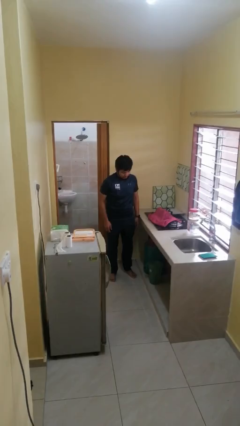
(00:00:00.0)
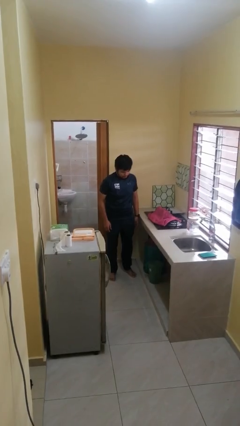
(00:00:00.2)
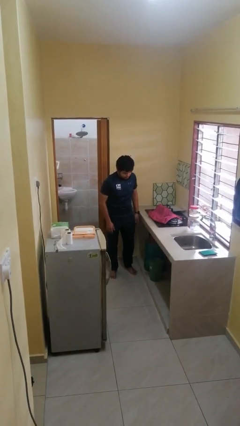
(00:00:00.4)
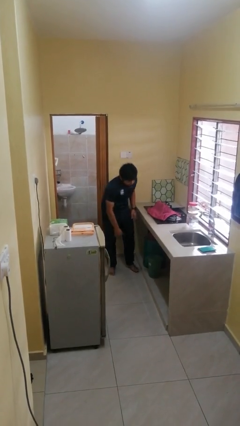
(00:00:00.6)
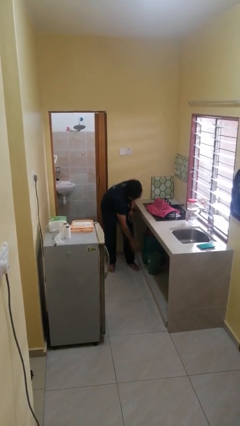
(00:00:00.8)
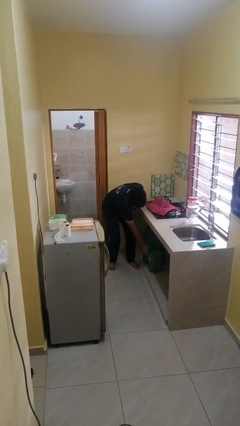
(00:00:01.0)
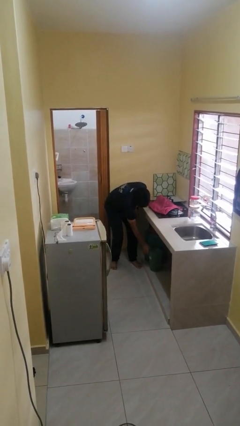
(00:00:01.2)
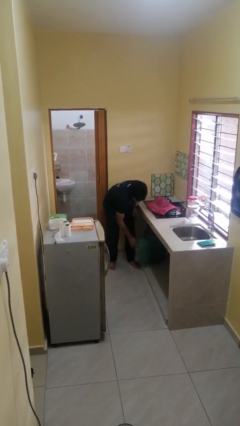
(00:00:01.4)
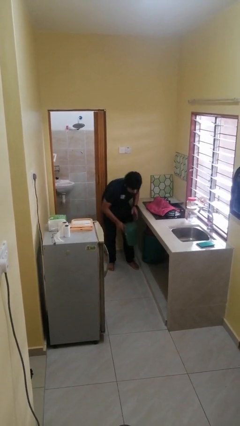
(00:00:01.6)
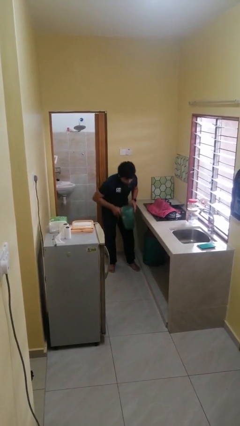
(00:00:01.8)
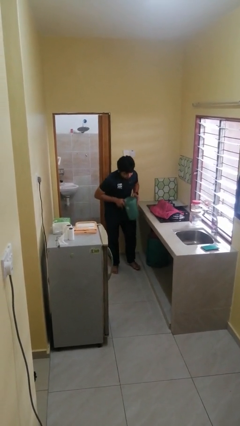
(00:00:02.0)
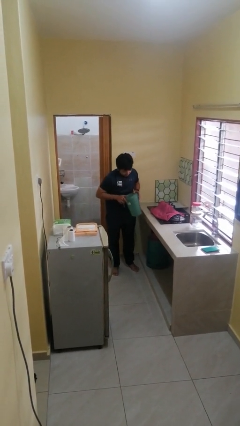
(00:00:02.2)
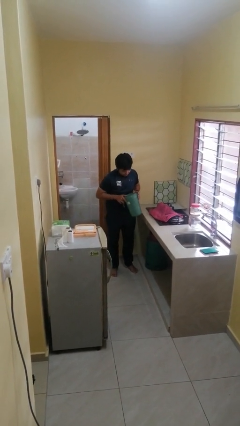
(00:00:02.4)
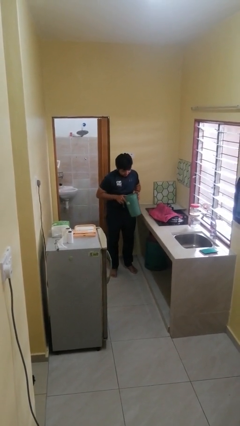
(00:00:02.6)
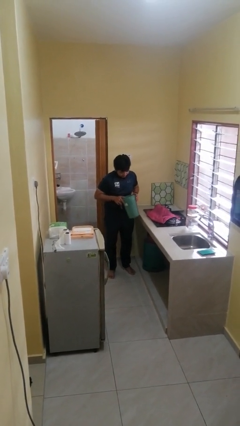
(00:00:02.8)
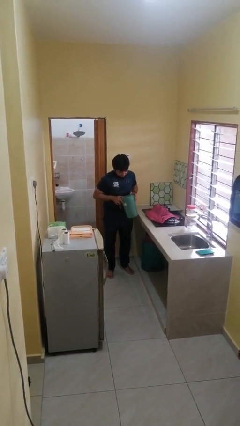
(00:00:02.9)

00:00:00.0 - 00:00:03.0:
person picks up object from cabinet

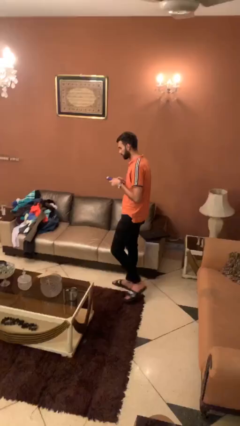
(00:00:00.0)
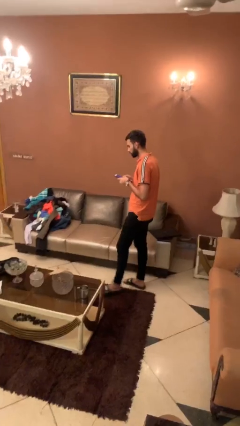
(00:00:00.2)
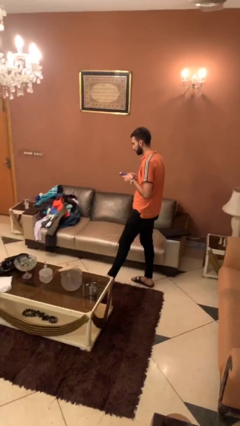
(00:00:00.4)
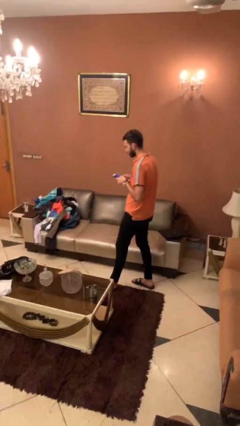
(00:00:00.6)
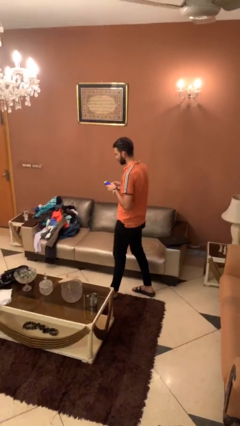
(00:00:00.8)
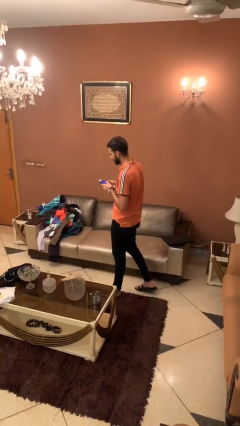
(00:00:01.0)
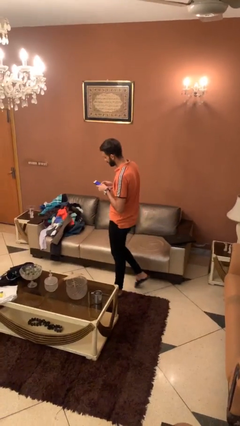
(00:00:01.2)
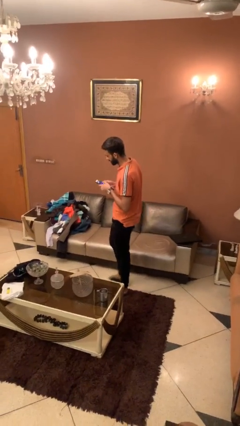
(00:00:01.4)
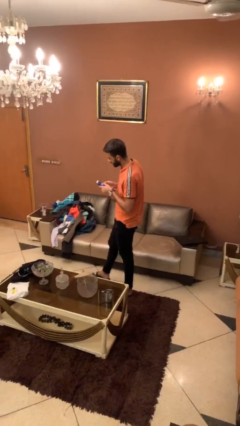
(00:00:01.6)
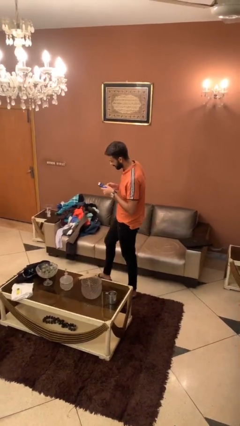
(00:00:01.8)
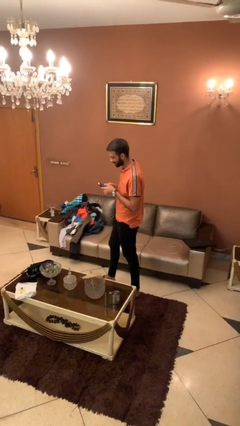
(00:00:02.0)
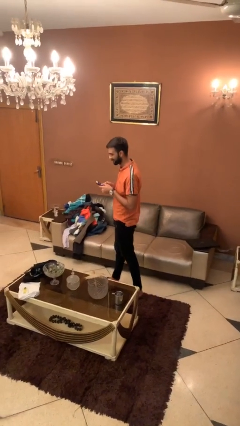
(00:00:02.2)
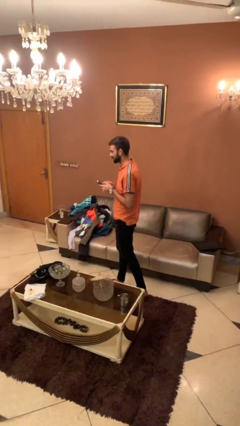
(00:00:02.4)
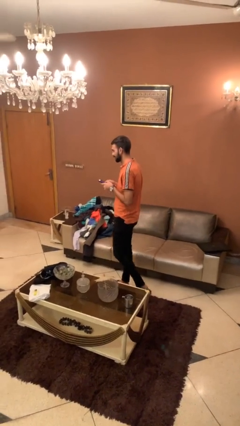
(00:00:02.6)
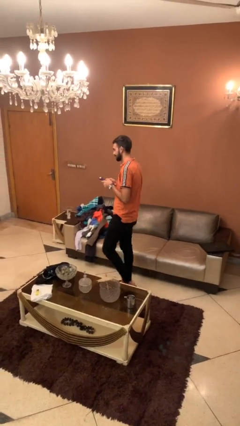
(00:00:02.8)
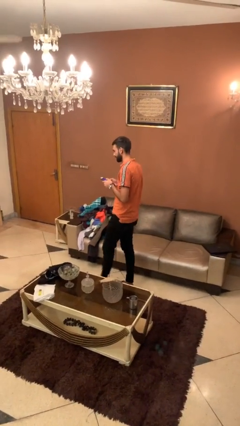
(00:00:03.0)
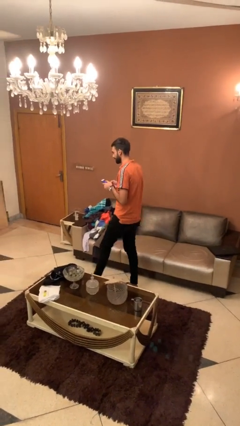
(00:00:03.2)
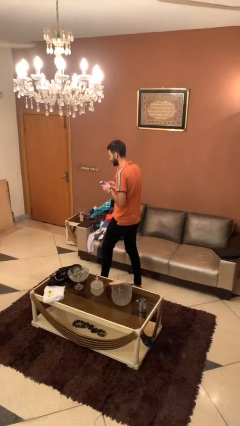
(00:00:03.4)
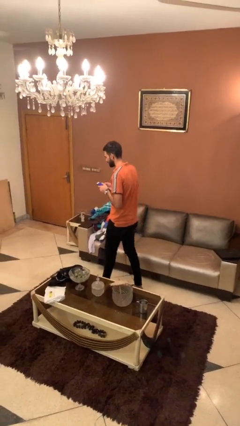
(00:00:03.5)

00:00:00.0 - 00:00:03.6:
person texts on phone

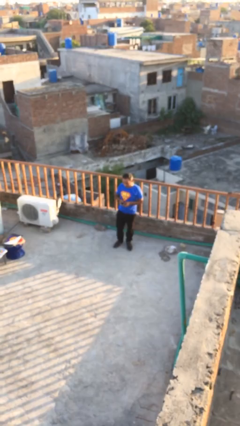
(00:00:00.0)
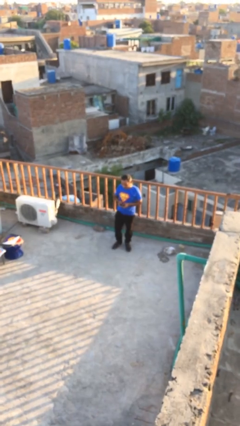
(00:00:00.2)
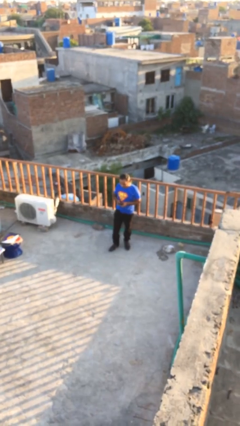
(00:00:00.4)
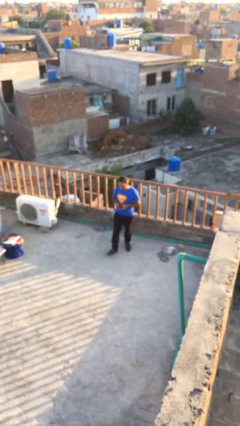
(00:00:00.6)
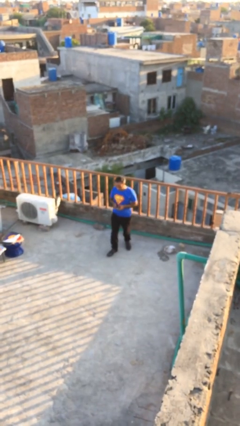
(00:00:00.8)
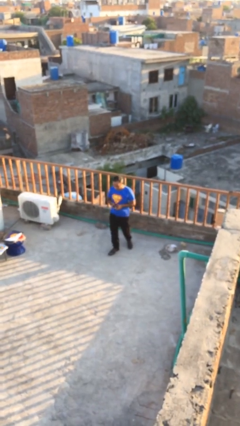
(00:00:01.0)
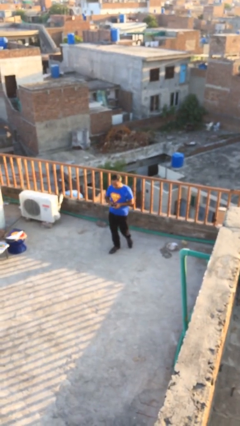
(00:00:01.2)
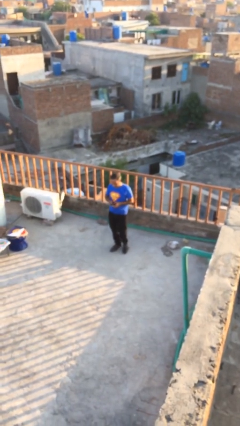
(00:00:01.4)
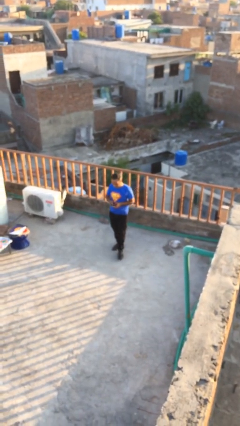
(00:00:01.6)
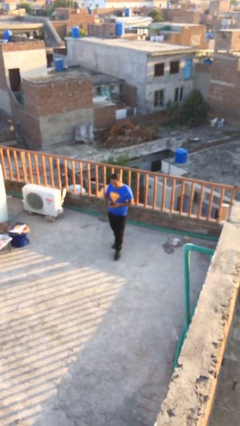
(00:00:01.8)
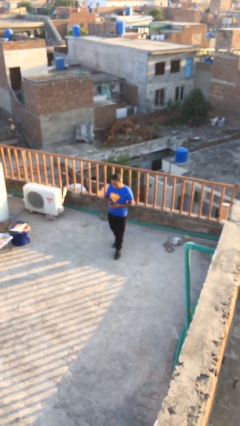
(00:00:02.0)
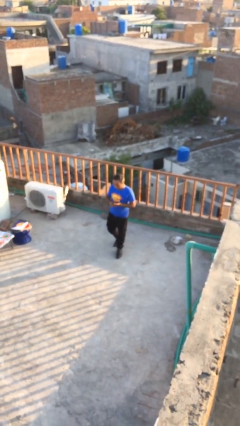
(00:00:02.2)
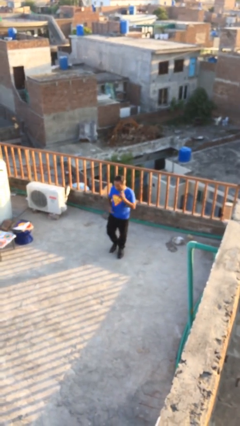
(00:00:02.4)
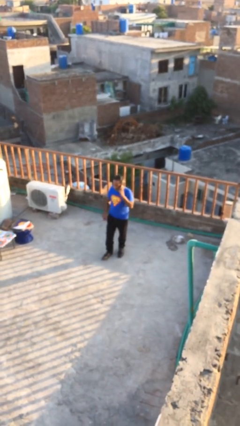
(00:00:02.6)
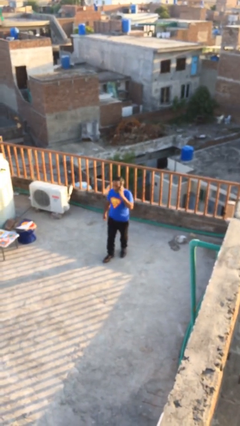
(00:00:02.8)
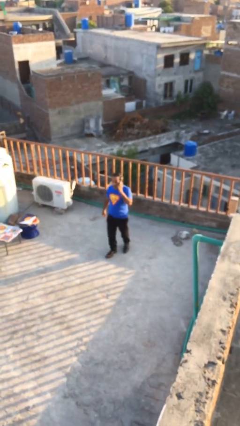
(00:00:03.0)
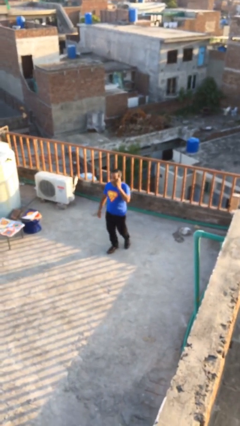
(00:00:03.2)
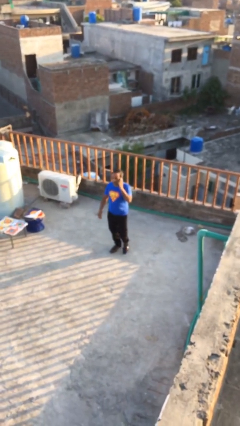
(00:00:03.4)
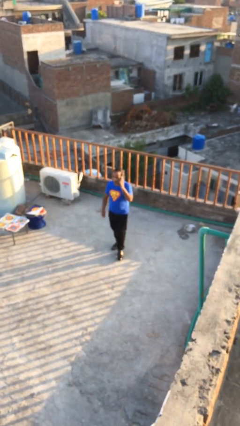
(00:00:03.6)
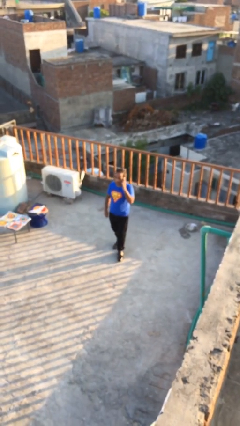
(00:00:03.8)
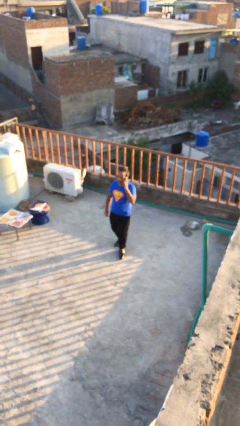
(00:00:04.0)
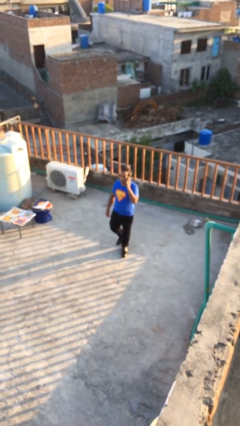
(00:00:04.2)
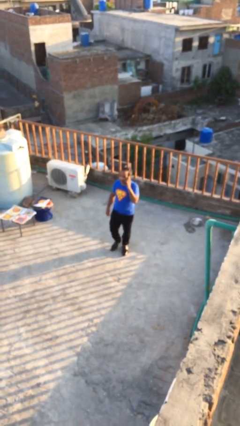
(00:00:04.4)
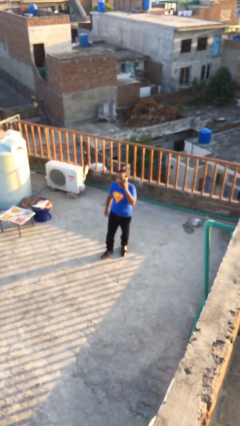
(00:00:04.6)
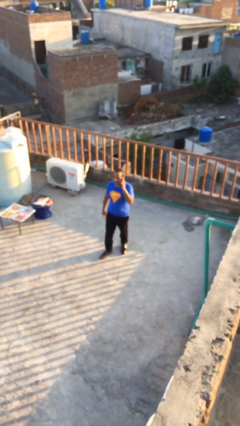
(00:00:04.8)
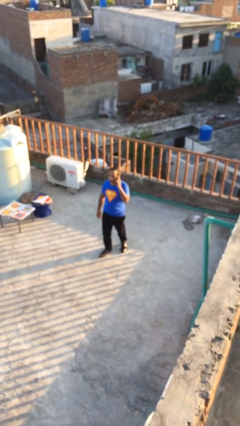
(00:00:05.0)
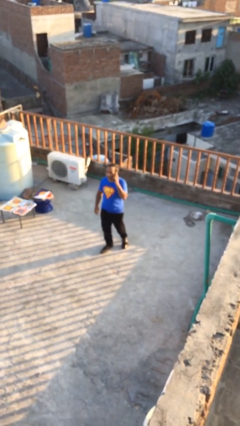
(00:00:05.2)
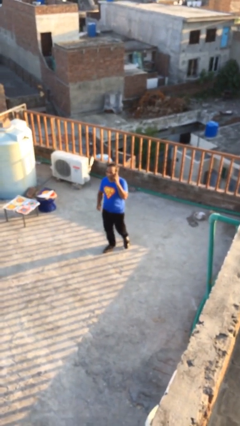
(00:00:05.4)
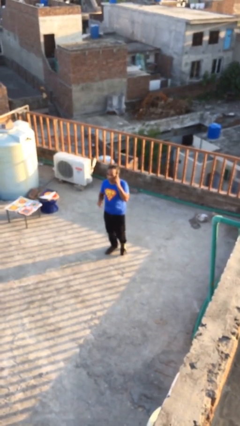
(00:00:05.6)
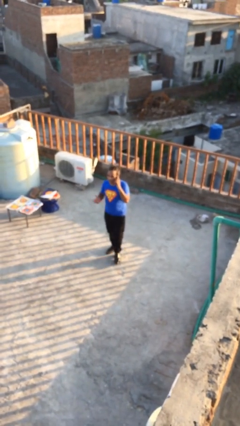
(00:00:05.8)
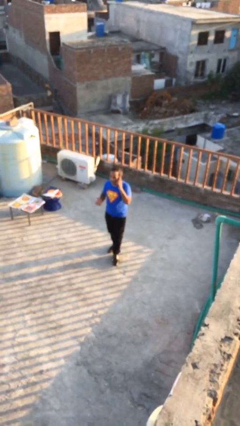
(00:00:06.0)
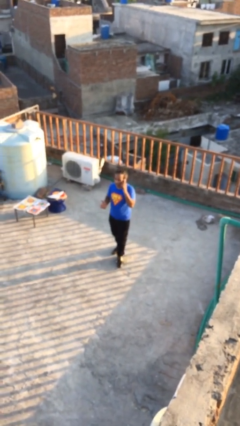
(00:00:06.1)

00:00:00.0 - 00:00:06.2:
person talks on phone

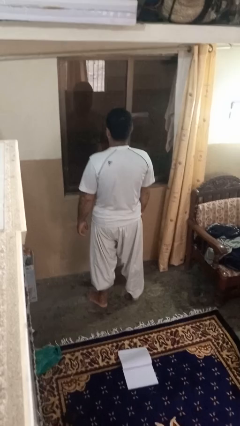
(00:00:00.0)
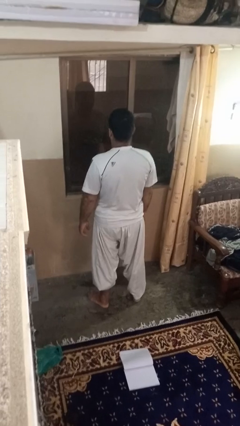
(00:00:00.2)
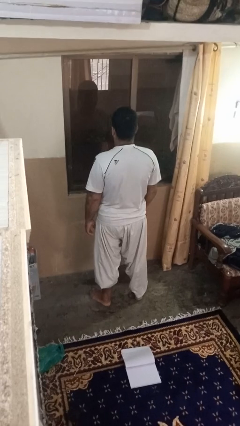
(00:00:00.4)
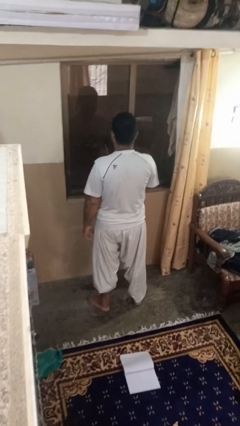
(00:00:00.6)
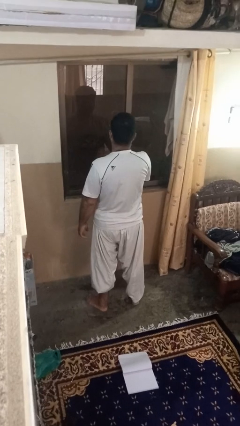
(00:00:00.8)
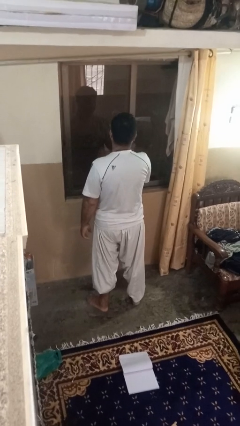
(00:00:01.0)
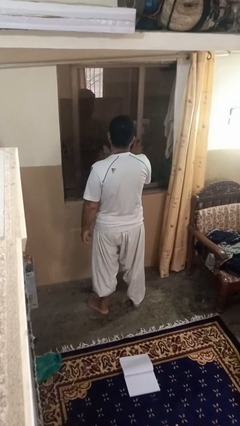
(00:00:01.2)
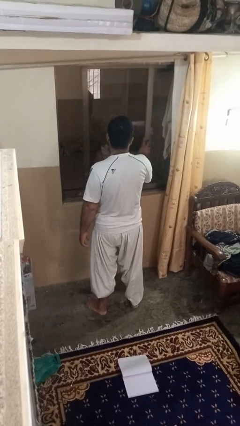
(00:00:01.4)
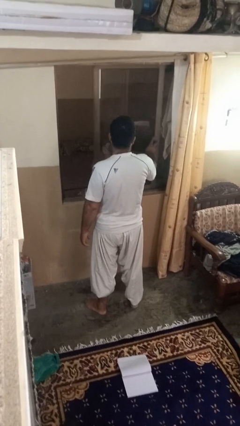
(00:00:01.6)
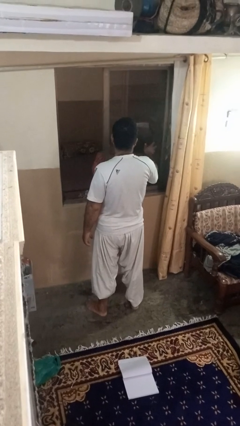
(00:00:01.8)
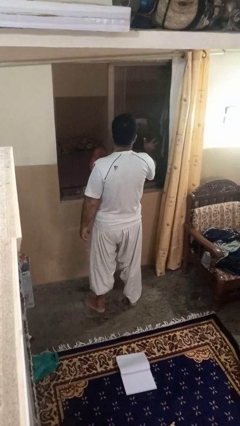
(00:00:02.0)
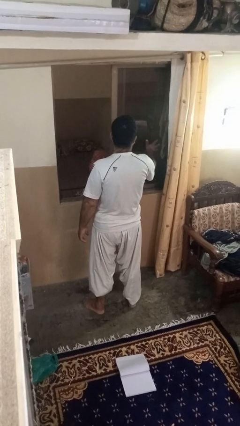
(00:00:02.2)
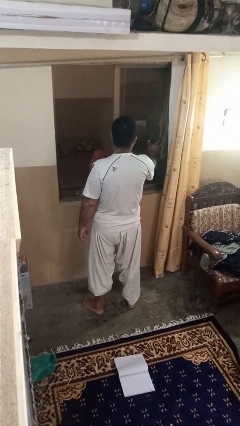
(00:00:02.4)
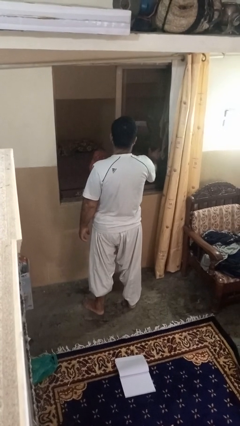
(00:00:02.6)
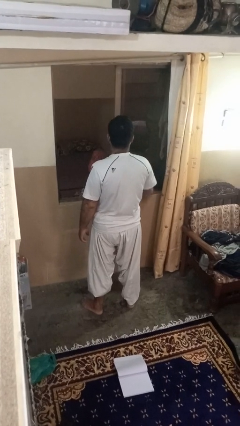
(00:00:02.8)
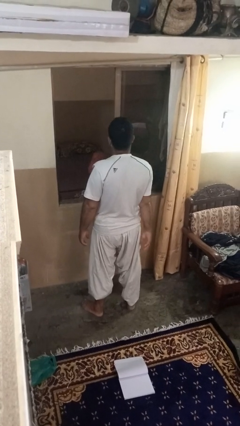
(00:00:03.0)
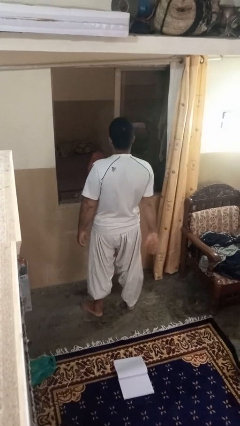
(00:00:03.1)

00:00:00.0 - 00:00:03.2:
person opens home window

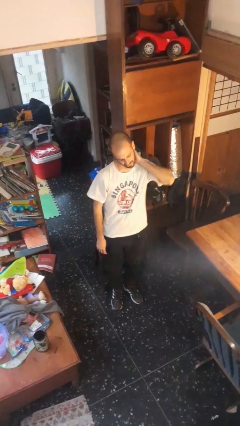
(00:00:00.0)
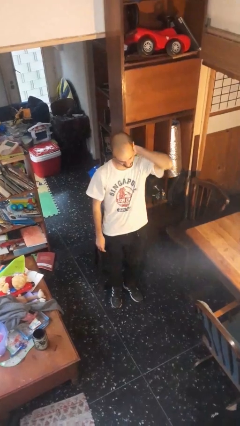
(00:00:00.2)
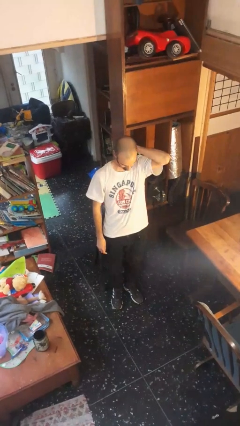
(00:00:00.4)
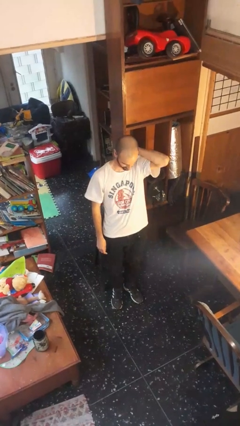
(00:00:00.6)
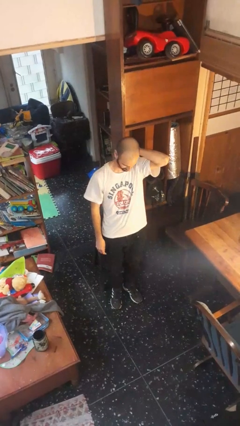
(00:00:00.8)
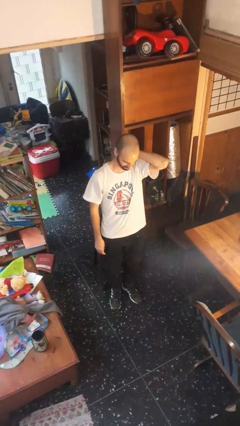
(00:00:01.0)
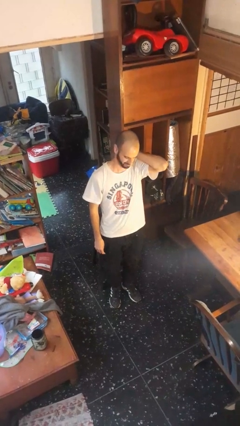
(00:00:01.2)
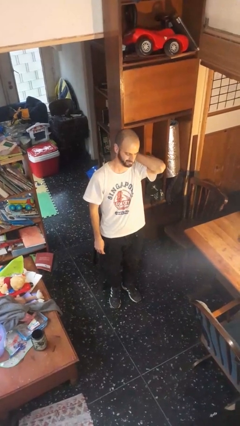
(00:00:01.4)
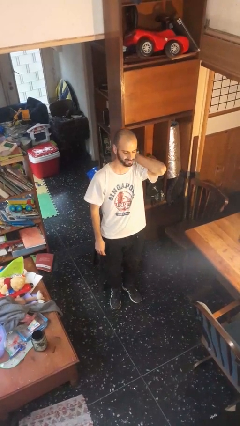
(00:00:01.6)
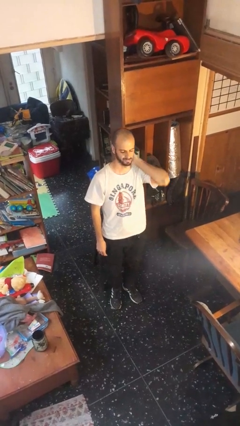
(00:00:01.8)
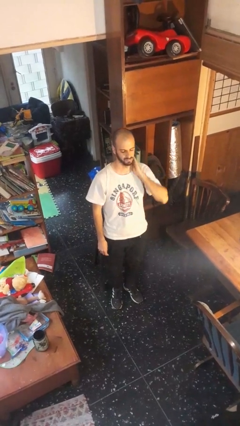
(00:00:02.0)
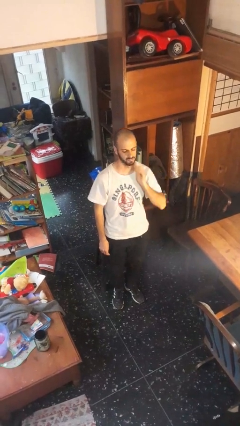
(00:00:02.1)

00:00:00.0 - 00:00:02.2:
person rubs neck
